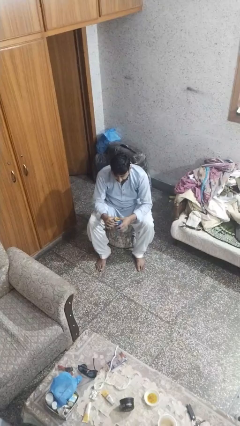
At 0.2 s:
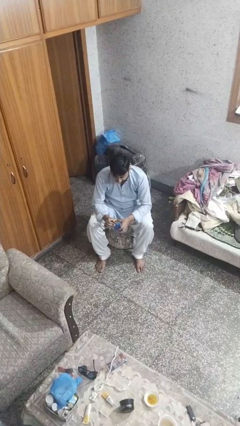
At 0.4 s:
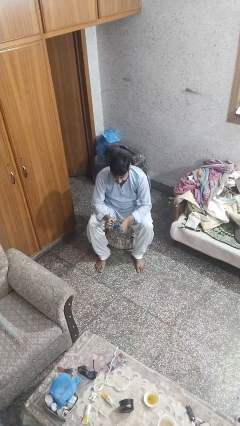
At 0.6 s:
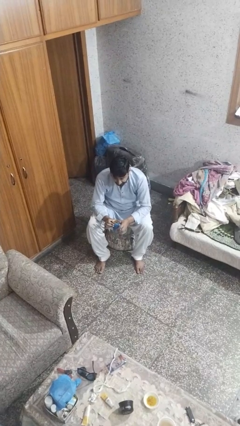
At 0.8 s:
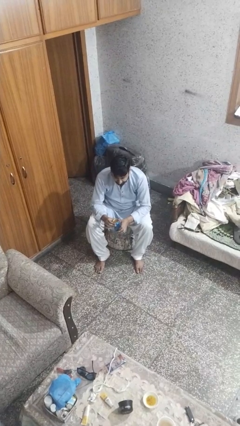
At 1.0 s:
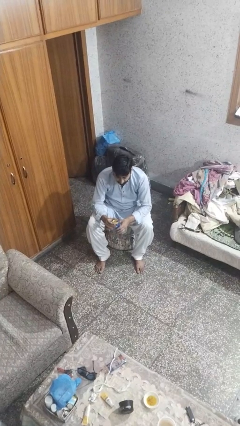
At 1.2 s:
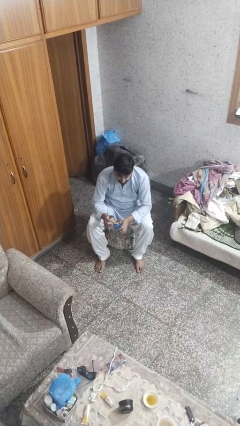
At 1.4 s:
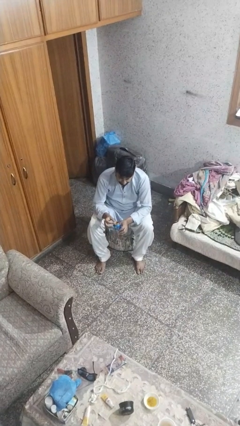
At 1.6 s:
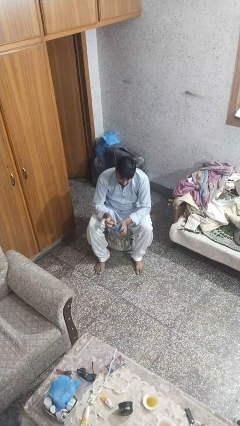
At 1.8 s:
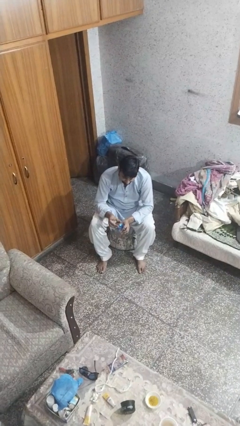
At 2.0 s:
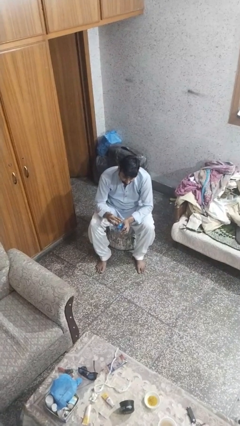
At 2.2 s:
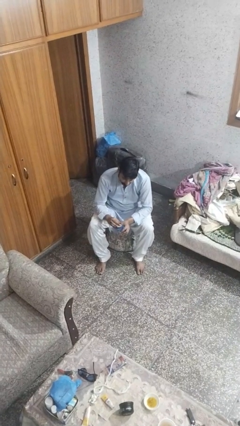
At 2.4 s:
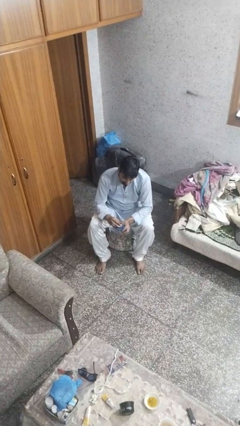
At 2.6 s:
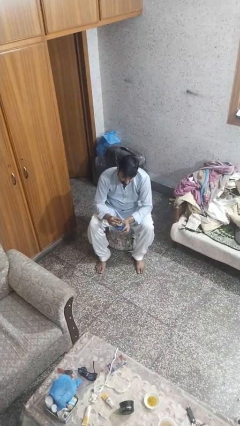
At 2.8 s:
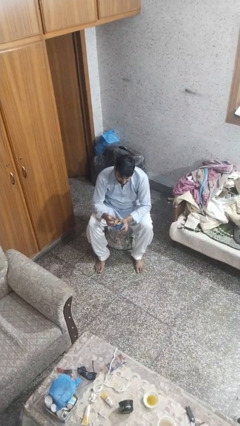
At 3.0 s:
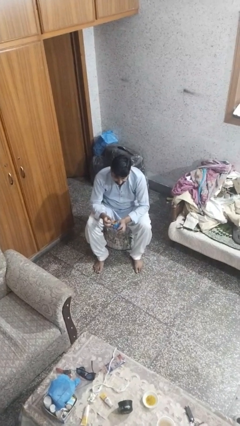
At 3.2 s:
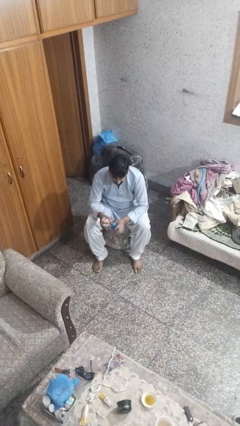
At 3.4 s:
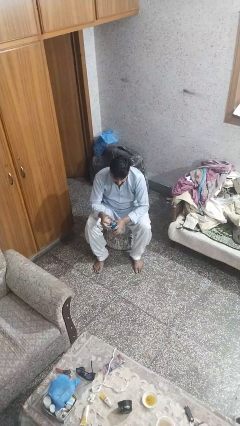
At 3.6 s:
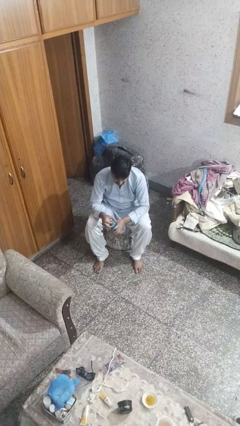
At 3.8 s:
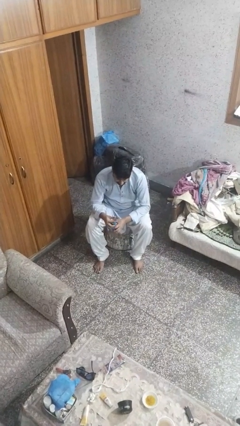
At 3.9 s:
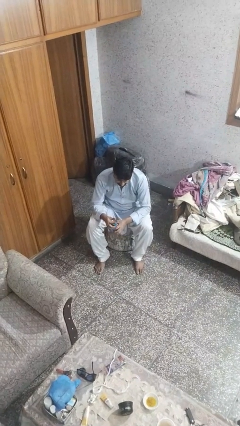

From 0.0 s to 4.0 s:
person opens beverage can

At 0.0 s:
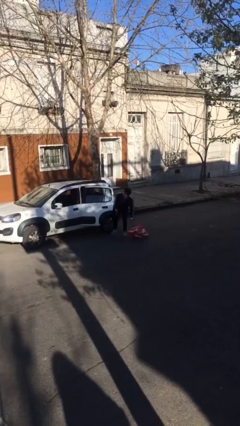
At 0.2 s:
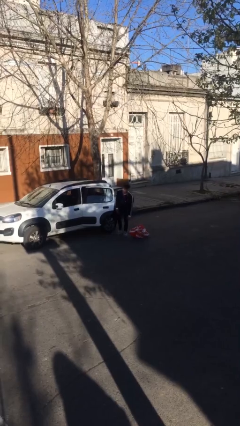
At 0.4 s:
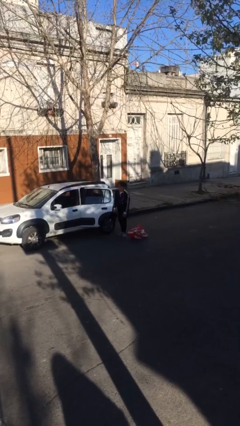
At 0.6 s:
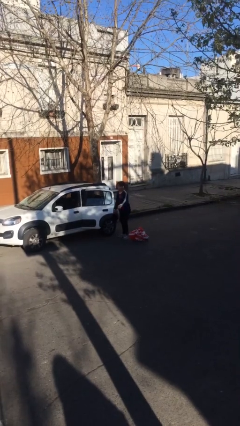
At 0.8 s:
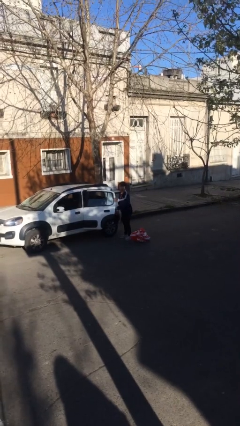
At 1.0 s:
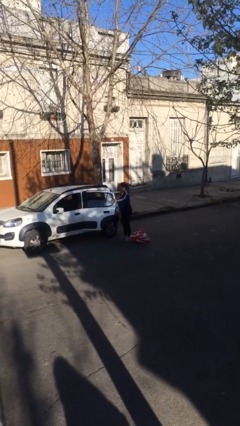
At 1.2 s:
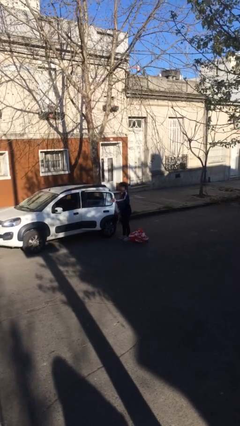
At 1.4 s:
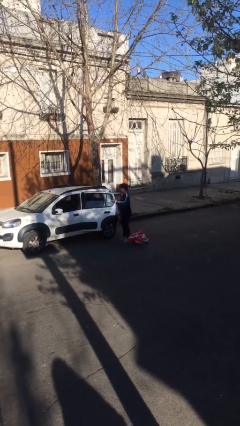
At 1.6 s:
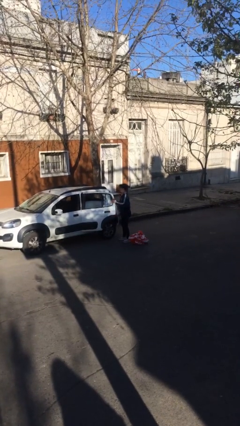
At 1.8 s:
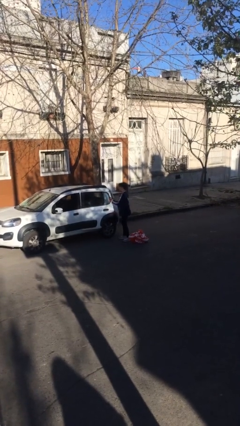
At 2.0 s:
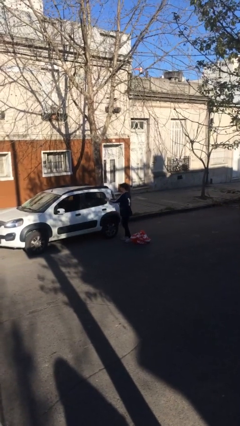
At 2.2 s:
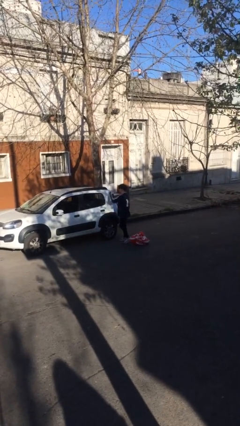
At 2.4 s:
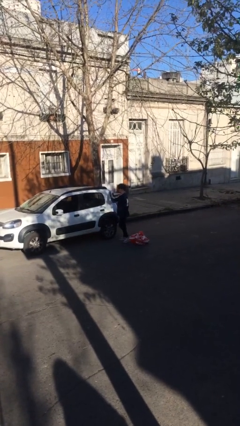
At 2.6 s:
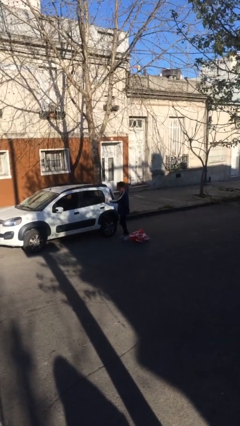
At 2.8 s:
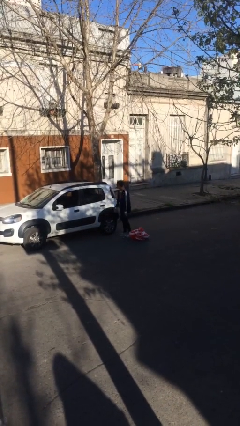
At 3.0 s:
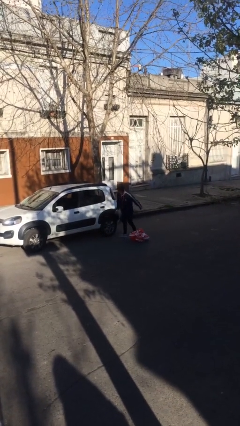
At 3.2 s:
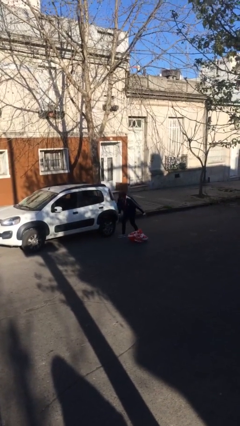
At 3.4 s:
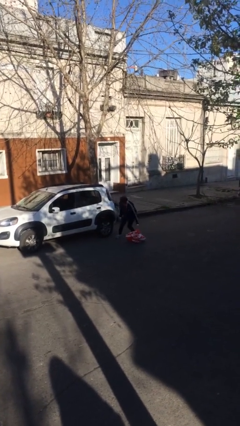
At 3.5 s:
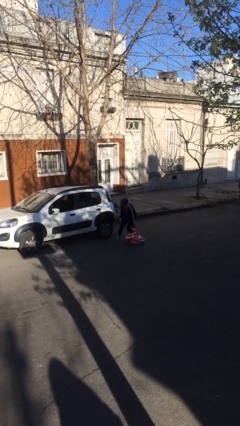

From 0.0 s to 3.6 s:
person closes car door

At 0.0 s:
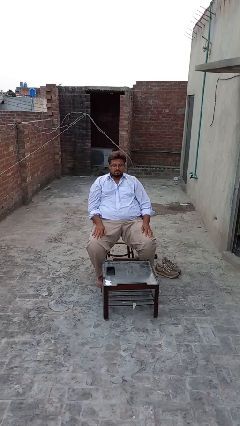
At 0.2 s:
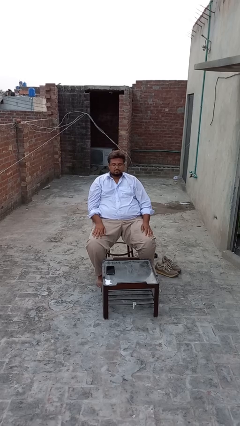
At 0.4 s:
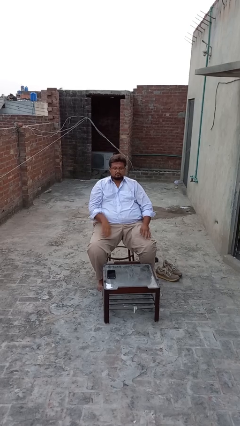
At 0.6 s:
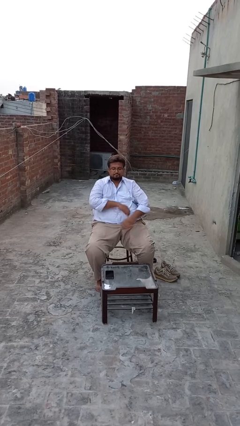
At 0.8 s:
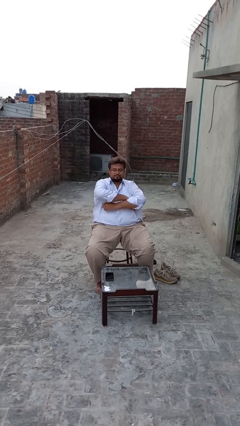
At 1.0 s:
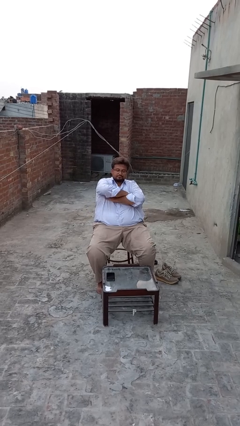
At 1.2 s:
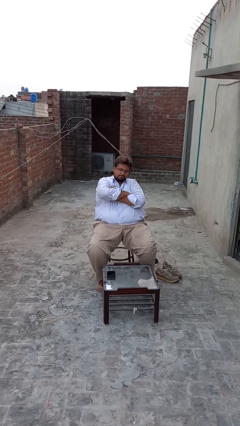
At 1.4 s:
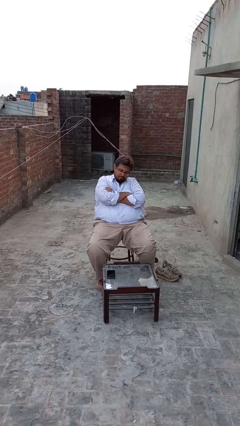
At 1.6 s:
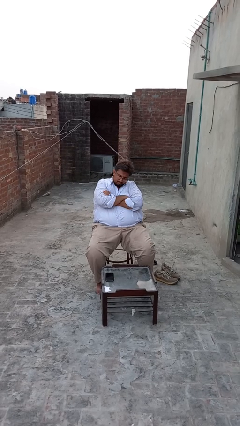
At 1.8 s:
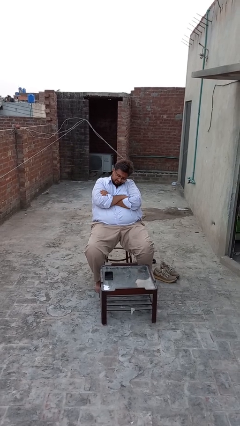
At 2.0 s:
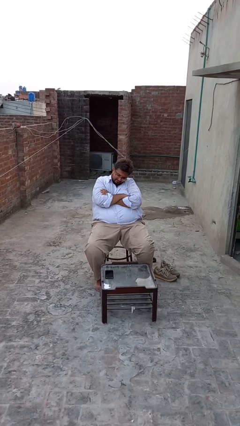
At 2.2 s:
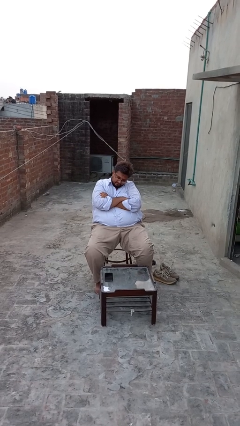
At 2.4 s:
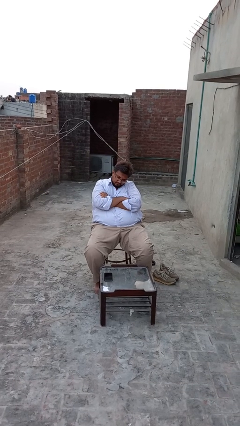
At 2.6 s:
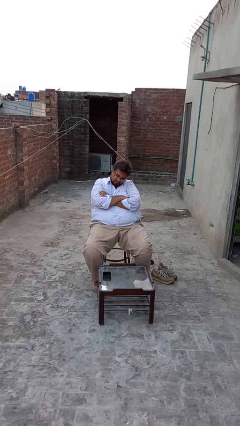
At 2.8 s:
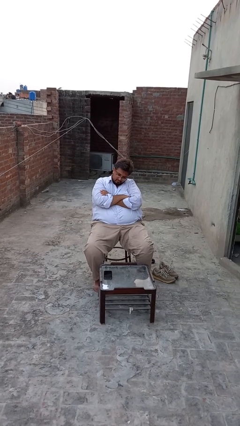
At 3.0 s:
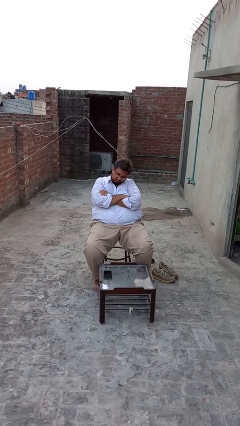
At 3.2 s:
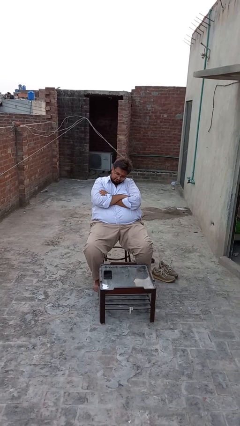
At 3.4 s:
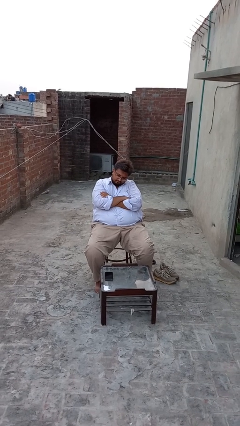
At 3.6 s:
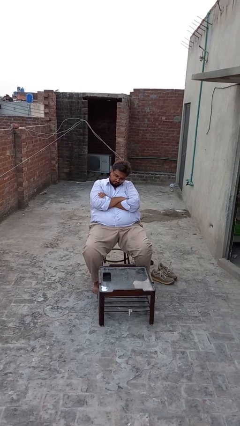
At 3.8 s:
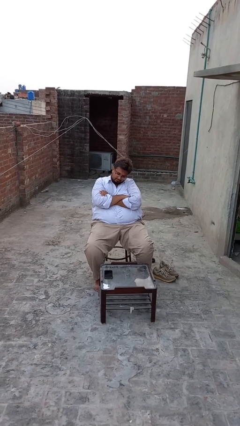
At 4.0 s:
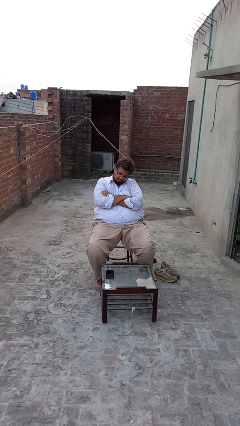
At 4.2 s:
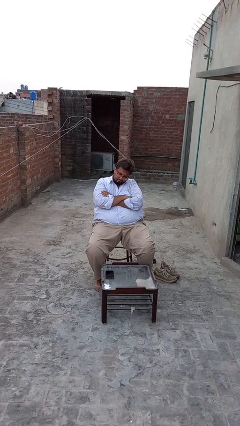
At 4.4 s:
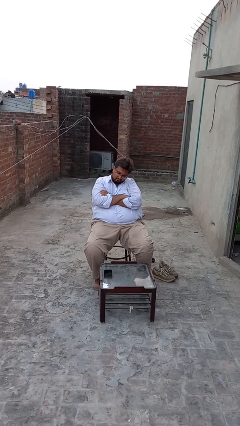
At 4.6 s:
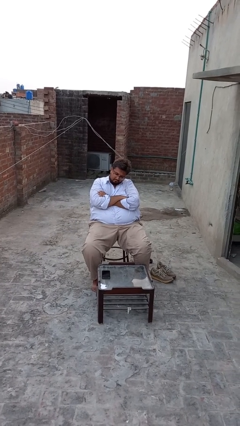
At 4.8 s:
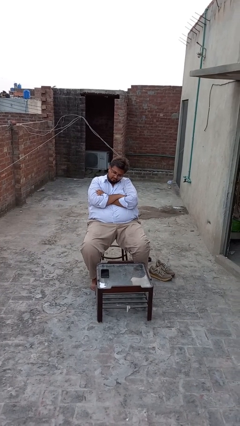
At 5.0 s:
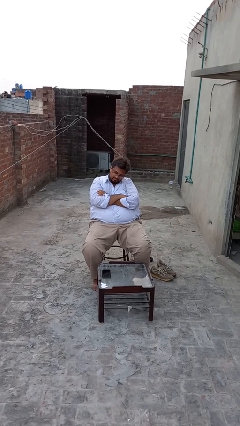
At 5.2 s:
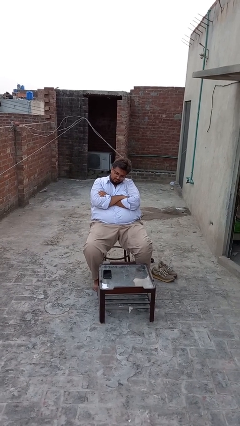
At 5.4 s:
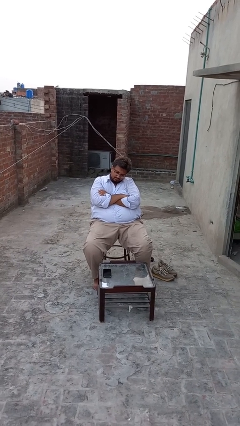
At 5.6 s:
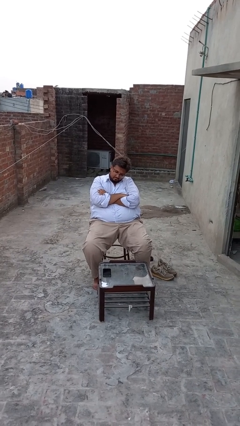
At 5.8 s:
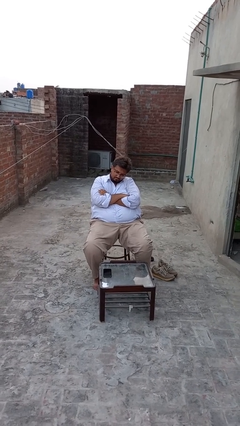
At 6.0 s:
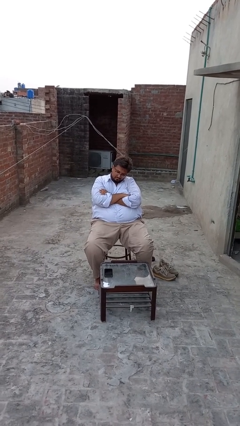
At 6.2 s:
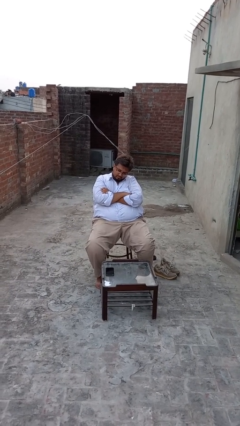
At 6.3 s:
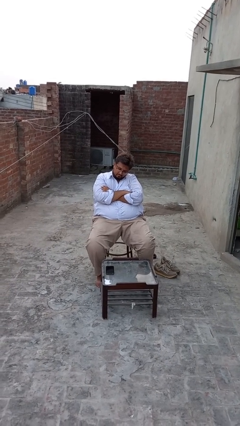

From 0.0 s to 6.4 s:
person crosses arms

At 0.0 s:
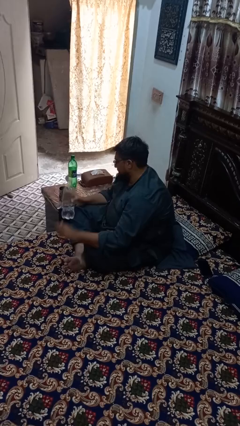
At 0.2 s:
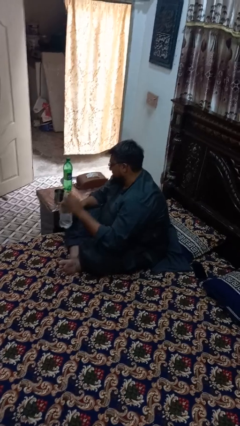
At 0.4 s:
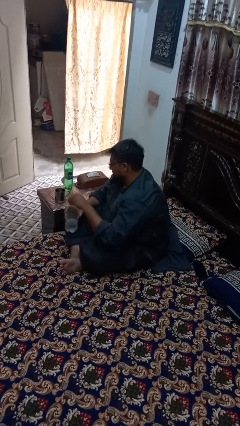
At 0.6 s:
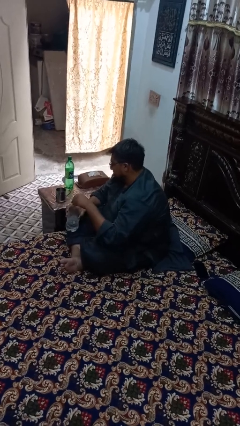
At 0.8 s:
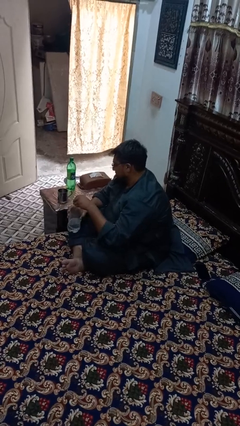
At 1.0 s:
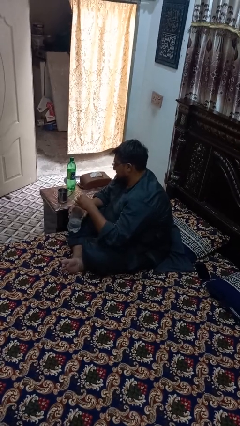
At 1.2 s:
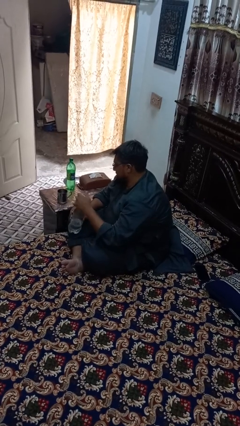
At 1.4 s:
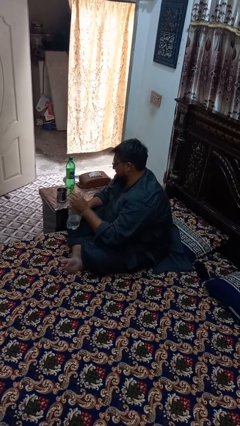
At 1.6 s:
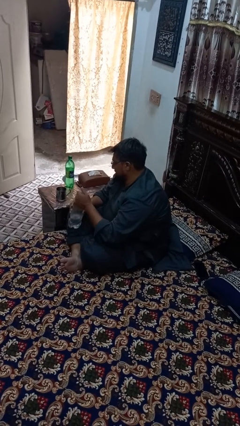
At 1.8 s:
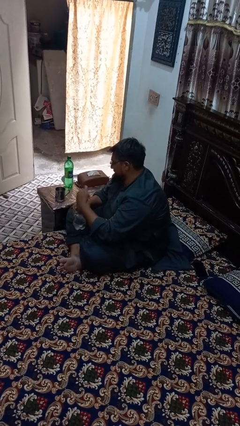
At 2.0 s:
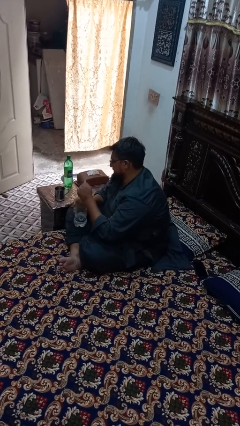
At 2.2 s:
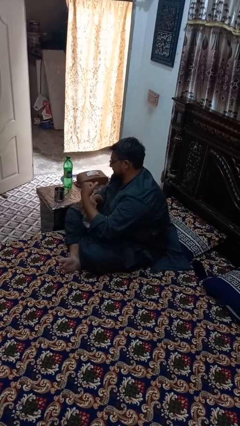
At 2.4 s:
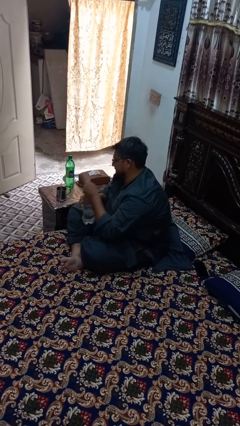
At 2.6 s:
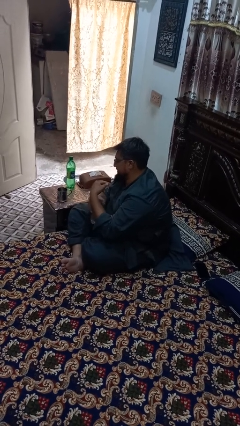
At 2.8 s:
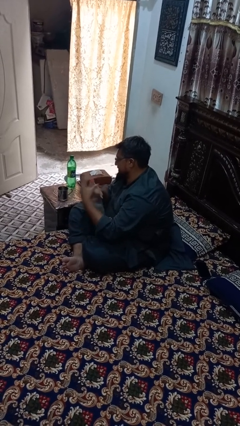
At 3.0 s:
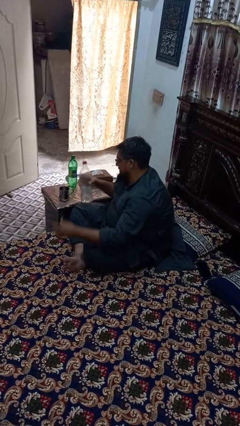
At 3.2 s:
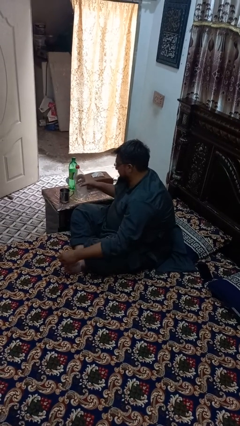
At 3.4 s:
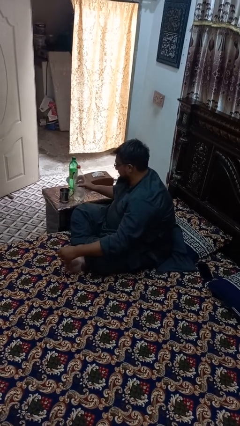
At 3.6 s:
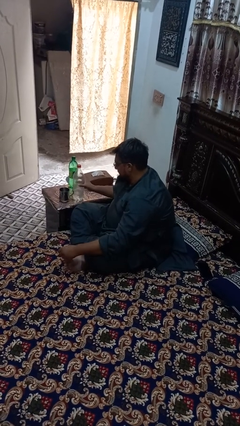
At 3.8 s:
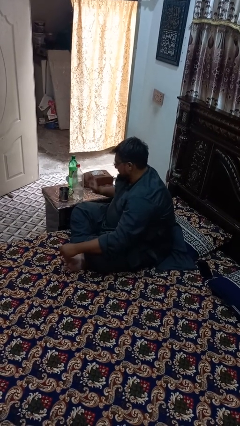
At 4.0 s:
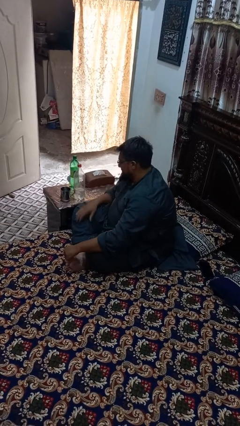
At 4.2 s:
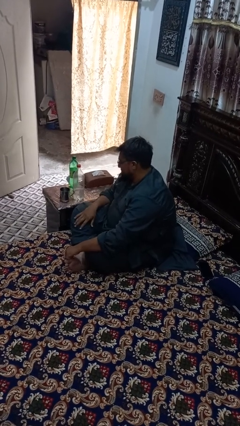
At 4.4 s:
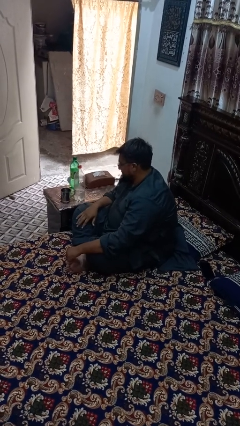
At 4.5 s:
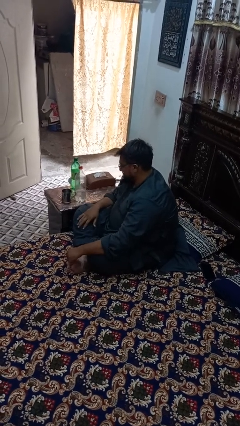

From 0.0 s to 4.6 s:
person screws lid to bottle
